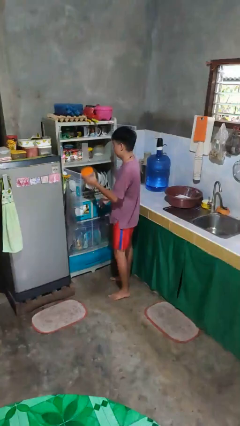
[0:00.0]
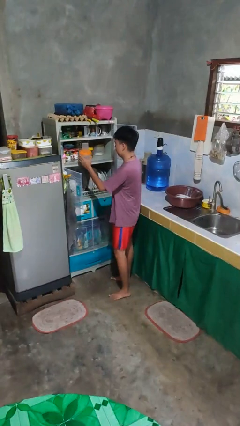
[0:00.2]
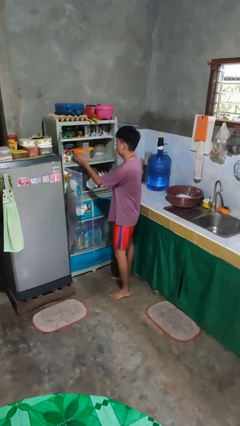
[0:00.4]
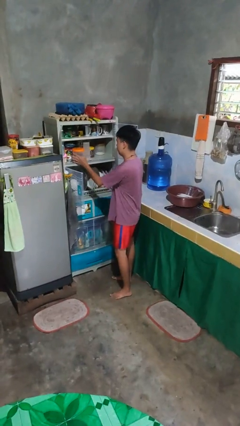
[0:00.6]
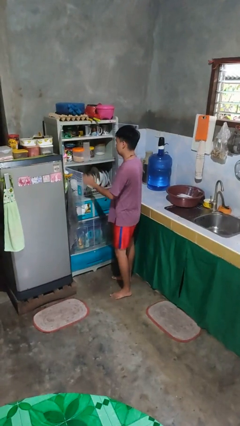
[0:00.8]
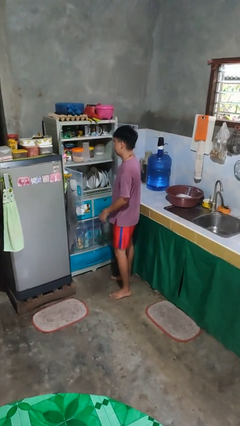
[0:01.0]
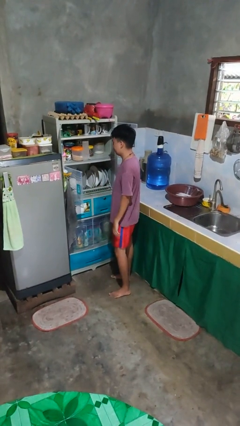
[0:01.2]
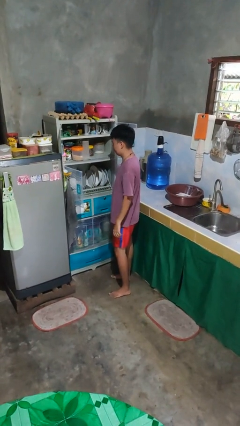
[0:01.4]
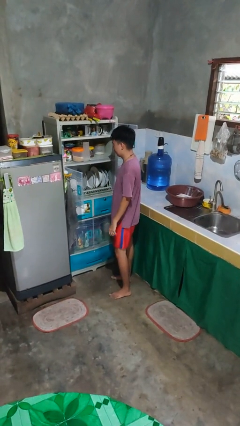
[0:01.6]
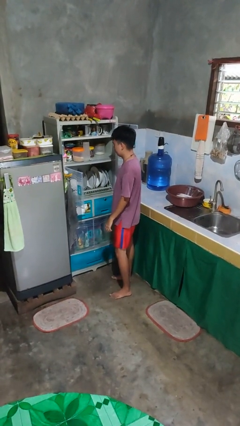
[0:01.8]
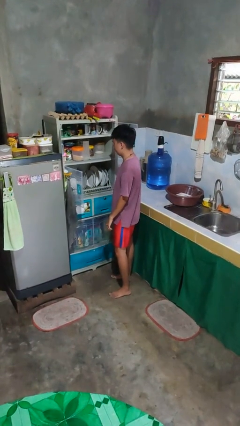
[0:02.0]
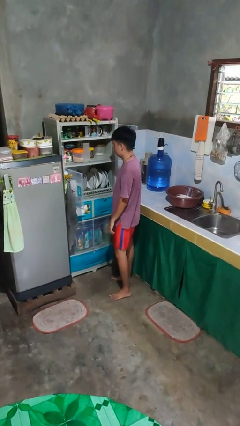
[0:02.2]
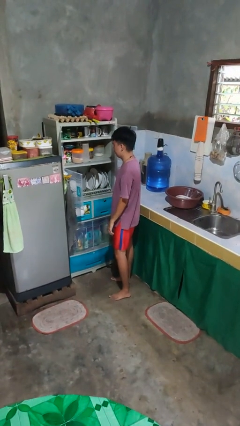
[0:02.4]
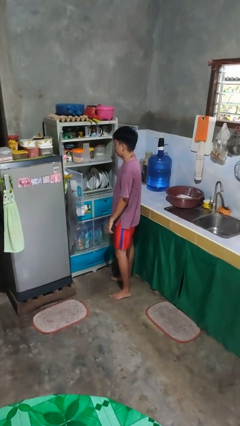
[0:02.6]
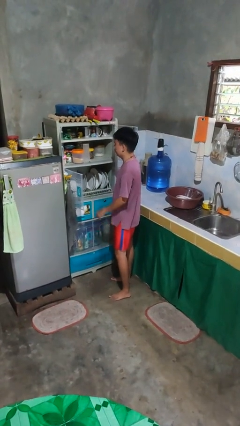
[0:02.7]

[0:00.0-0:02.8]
person puts object in cabinet

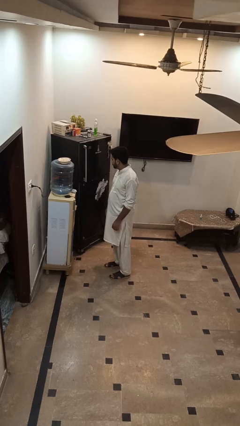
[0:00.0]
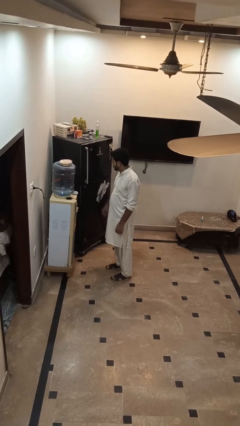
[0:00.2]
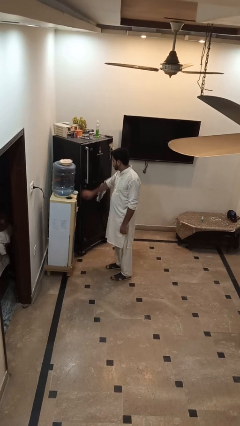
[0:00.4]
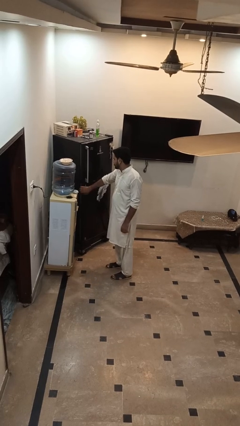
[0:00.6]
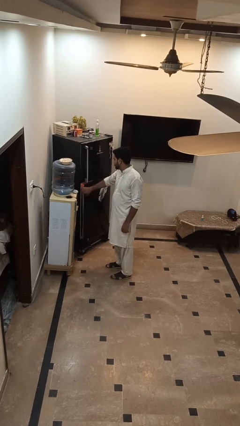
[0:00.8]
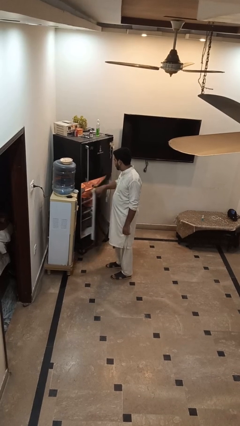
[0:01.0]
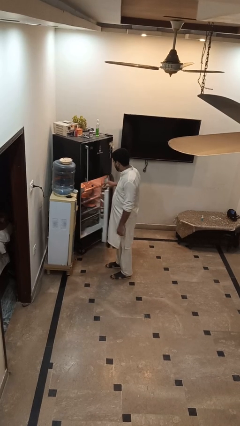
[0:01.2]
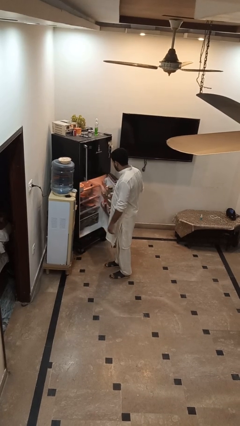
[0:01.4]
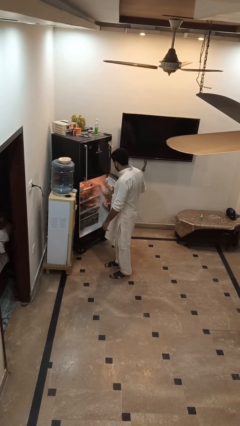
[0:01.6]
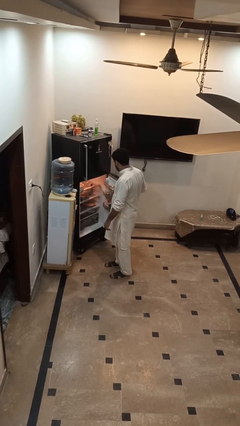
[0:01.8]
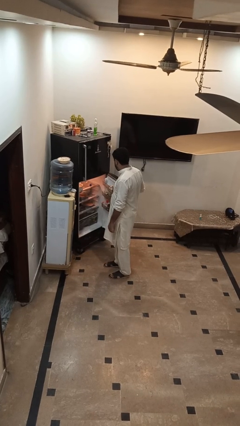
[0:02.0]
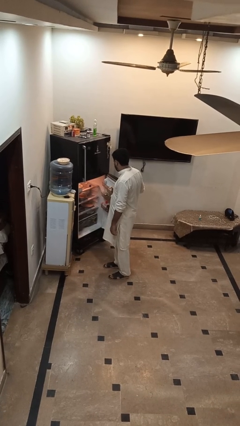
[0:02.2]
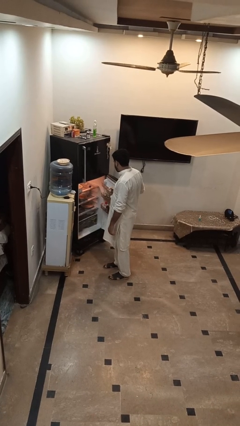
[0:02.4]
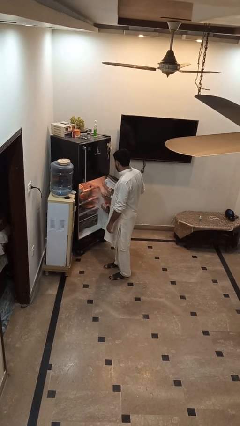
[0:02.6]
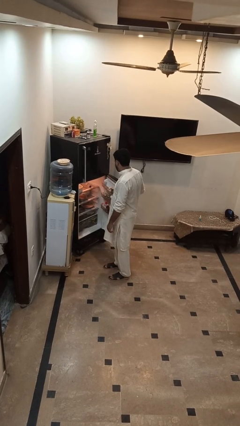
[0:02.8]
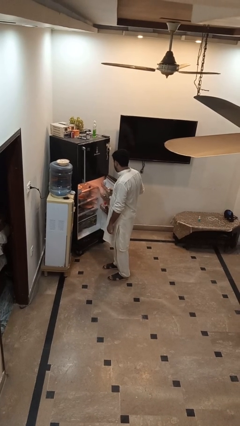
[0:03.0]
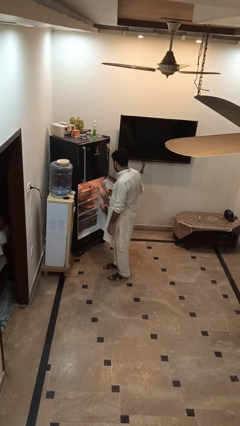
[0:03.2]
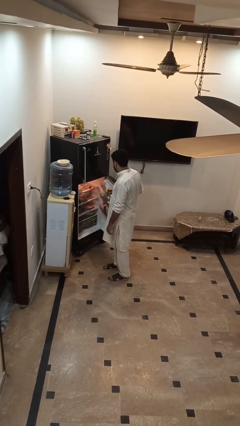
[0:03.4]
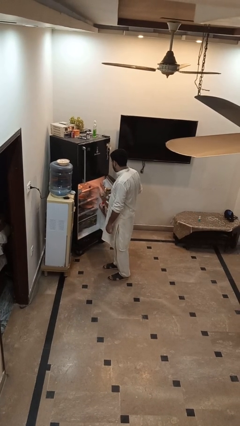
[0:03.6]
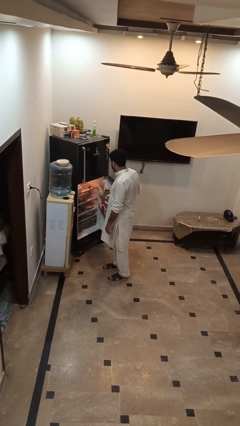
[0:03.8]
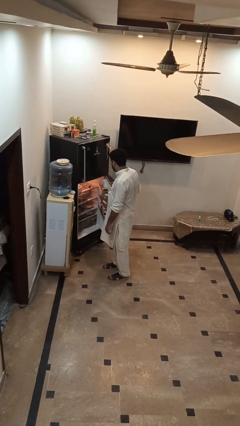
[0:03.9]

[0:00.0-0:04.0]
person opens refrigerator

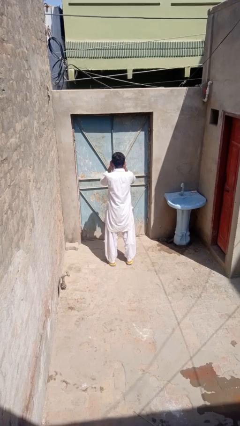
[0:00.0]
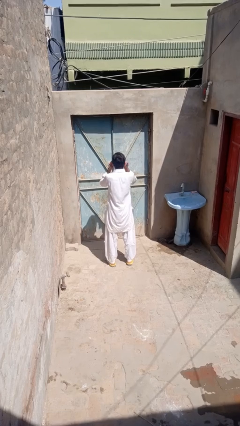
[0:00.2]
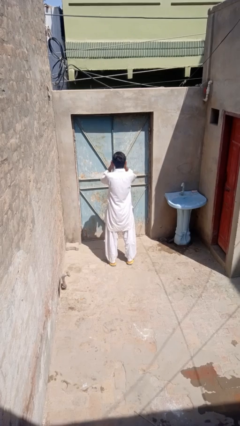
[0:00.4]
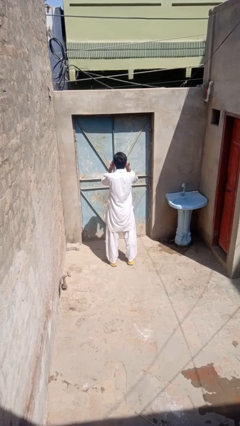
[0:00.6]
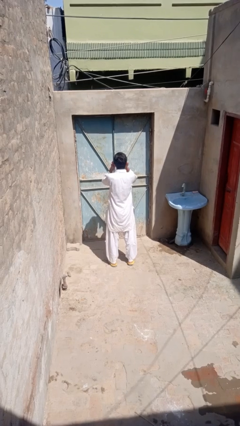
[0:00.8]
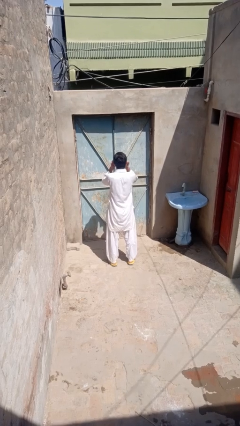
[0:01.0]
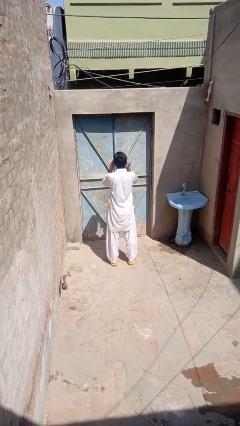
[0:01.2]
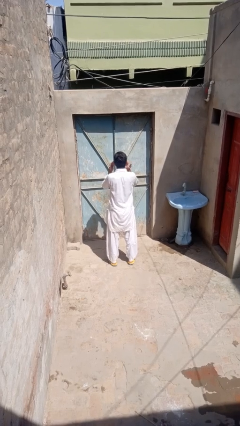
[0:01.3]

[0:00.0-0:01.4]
person rubs eyes

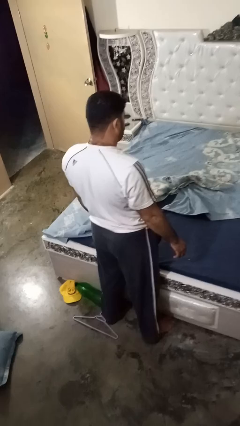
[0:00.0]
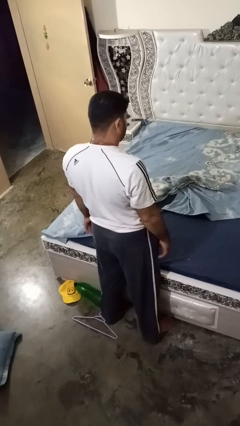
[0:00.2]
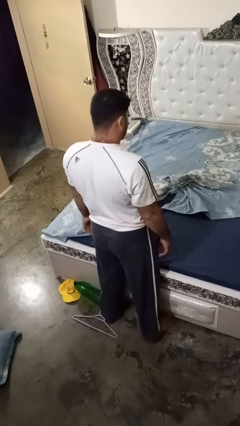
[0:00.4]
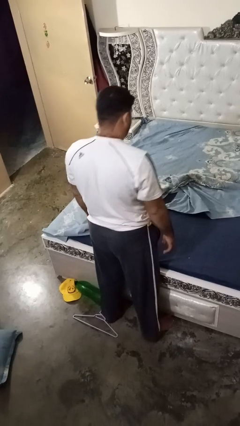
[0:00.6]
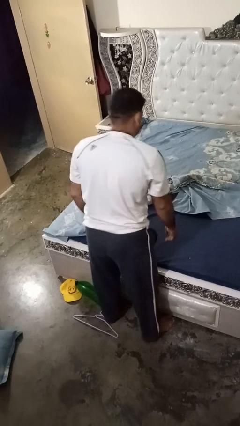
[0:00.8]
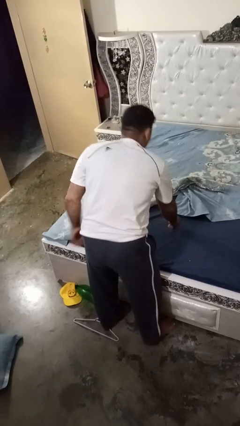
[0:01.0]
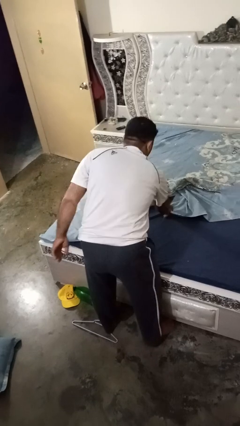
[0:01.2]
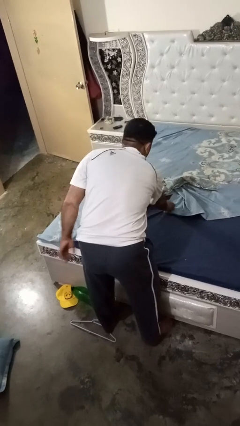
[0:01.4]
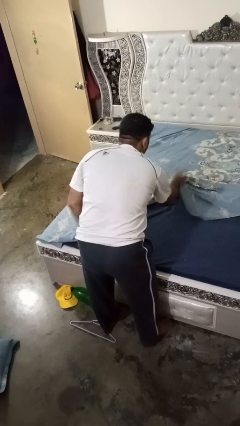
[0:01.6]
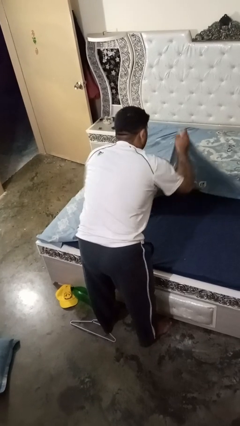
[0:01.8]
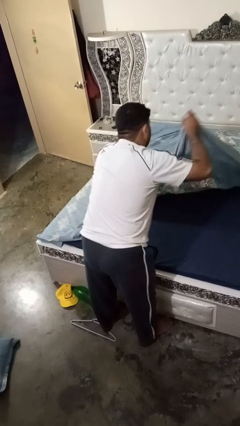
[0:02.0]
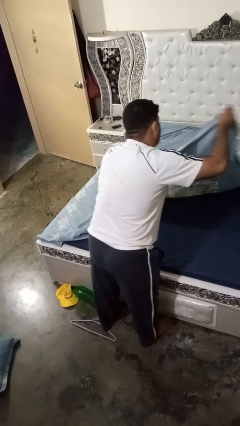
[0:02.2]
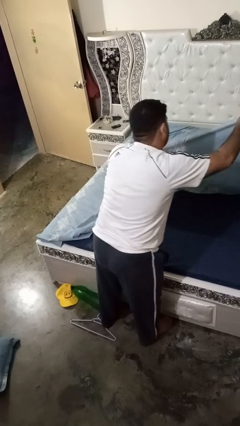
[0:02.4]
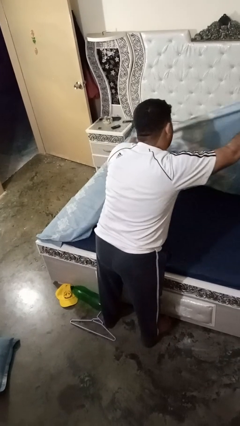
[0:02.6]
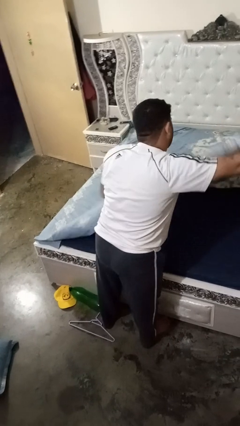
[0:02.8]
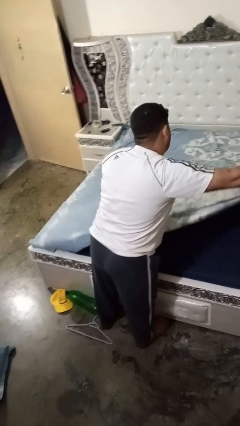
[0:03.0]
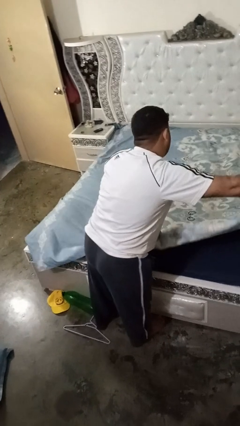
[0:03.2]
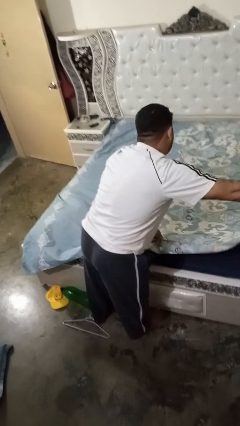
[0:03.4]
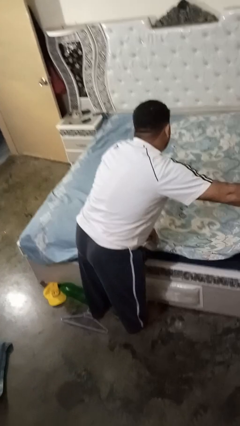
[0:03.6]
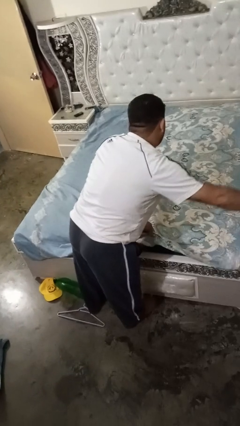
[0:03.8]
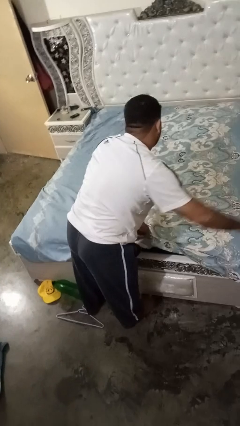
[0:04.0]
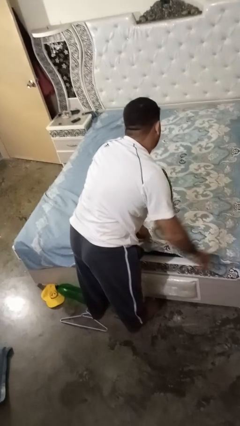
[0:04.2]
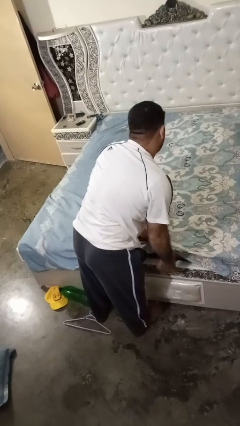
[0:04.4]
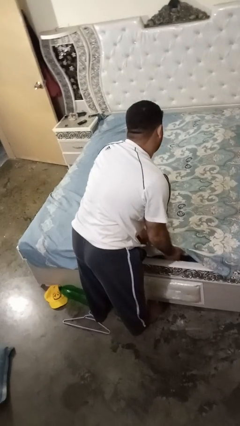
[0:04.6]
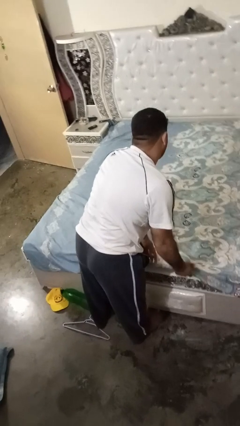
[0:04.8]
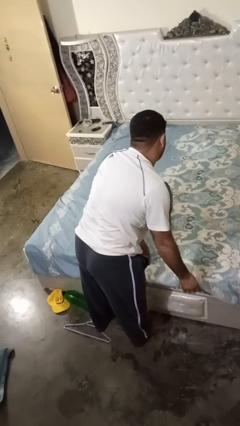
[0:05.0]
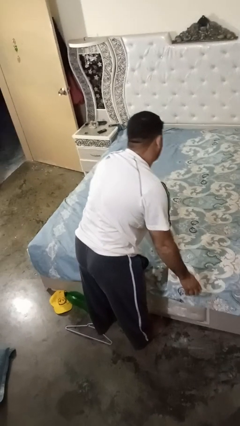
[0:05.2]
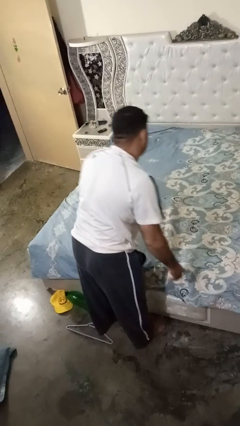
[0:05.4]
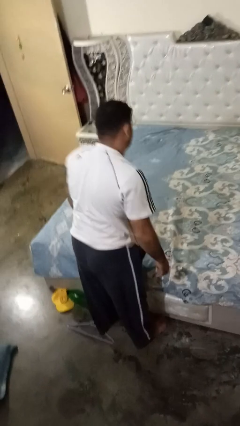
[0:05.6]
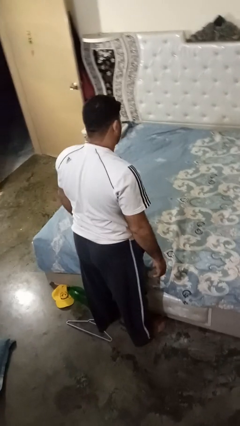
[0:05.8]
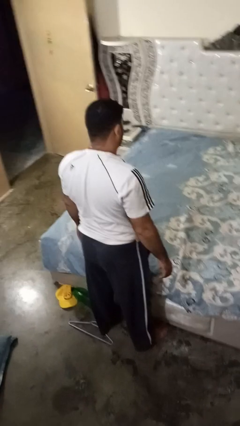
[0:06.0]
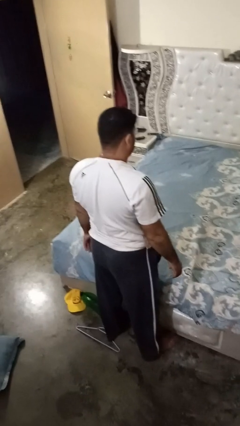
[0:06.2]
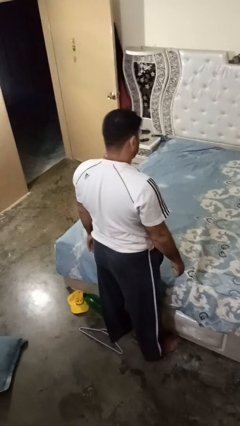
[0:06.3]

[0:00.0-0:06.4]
person makes bed

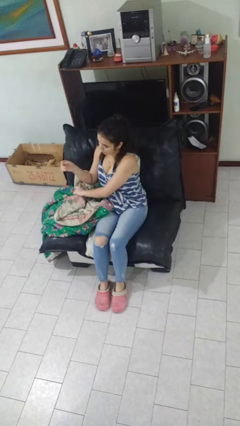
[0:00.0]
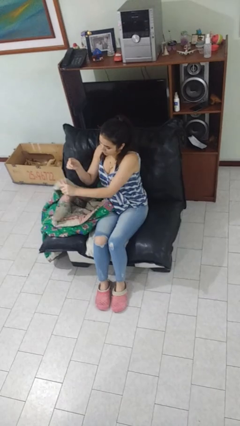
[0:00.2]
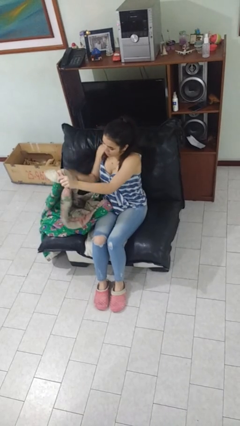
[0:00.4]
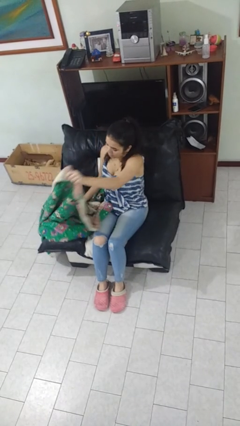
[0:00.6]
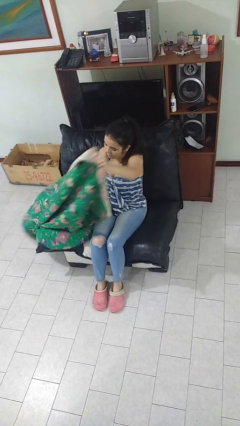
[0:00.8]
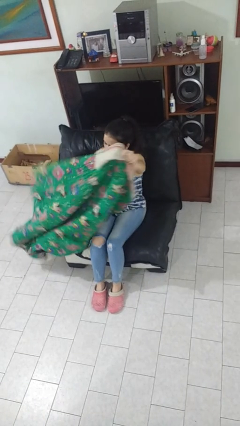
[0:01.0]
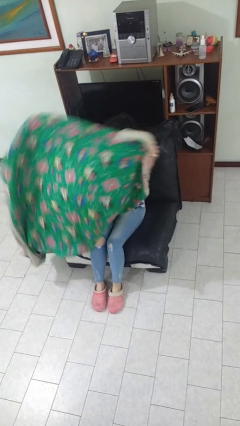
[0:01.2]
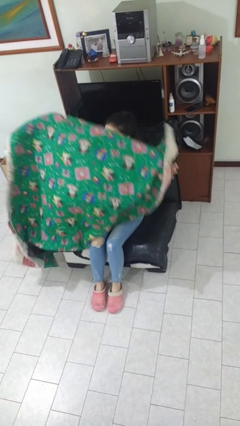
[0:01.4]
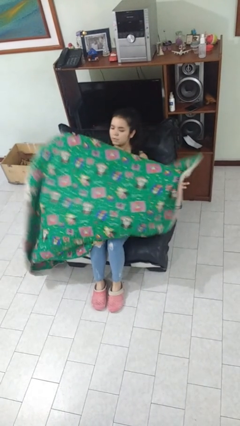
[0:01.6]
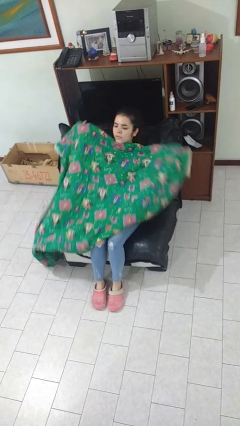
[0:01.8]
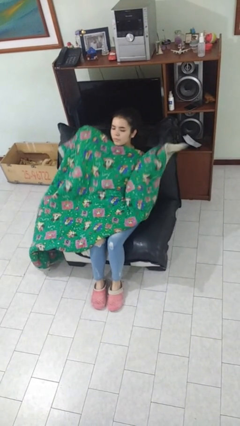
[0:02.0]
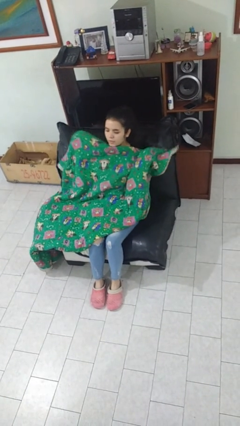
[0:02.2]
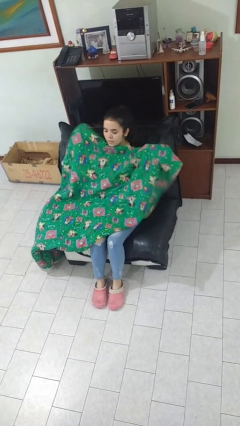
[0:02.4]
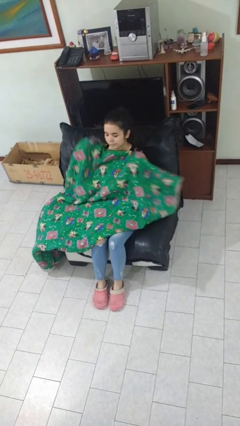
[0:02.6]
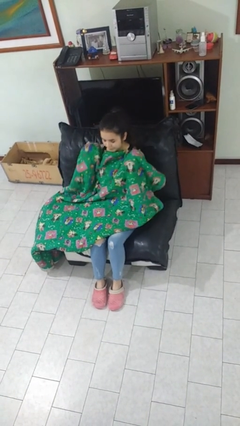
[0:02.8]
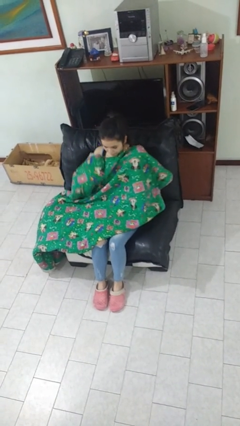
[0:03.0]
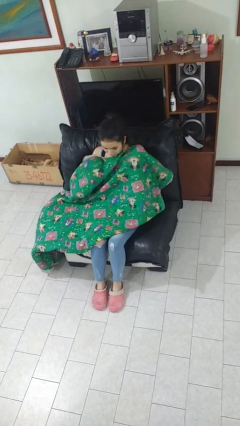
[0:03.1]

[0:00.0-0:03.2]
person covers with blanket

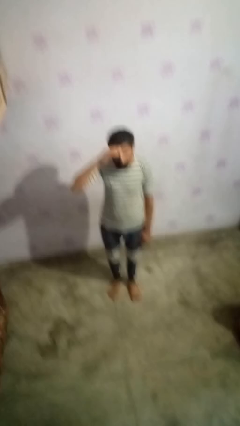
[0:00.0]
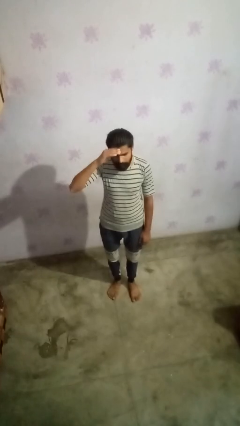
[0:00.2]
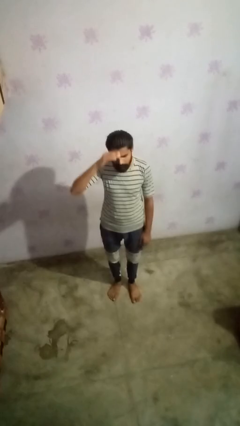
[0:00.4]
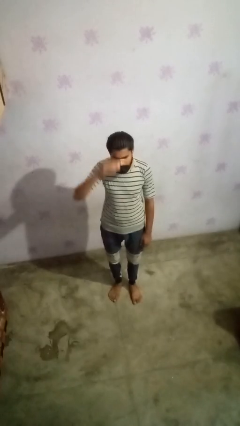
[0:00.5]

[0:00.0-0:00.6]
person salutes
